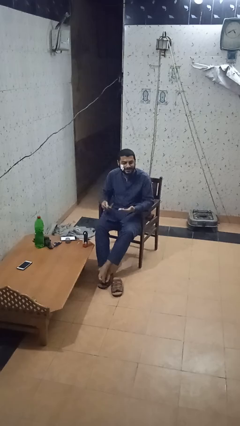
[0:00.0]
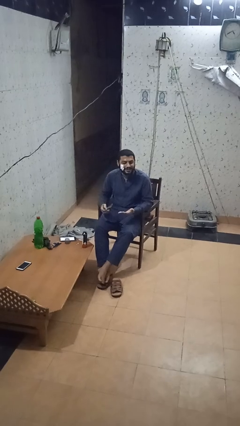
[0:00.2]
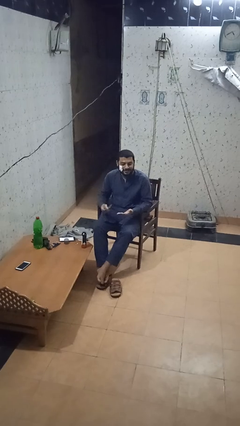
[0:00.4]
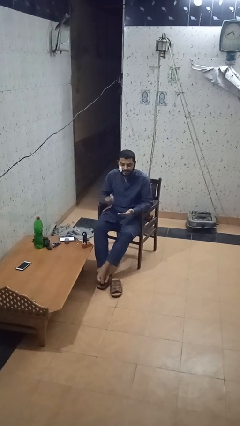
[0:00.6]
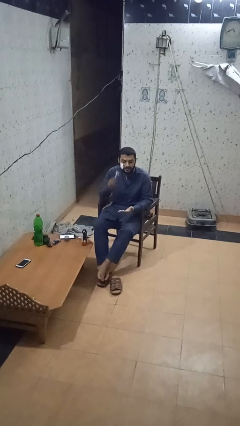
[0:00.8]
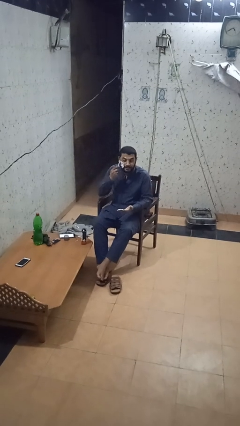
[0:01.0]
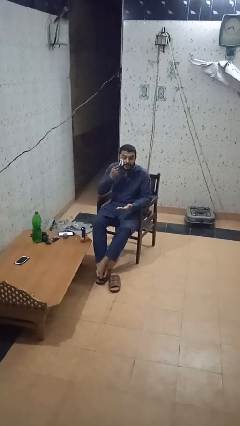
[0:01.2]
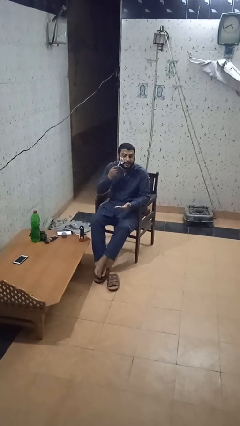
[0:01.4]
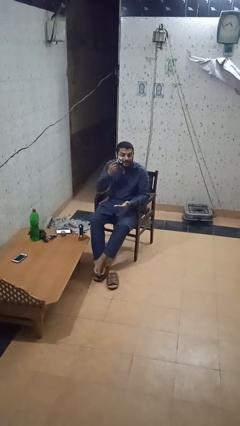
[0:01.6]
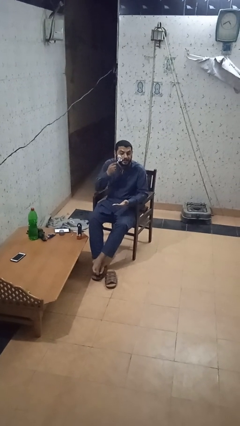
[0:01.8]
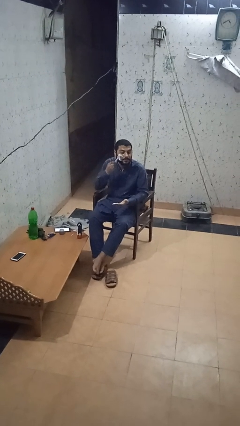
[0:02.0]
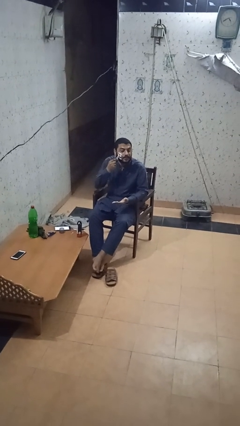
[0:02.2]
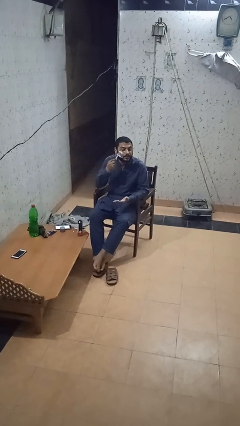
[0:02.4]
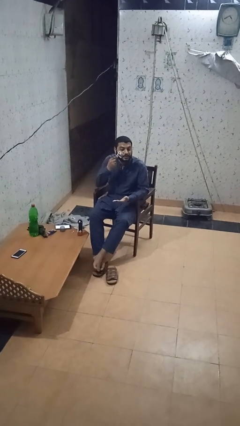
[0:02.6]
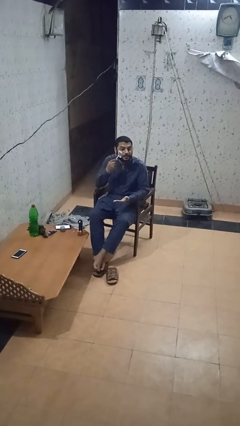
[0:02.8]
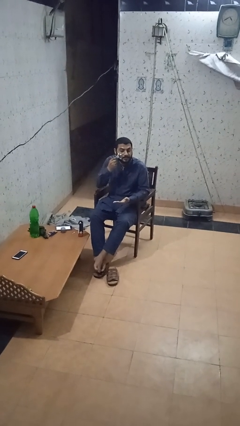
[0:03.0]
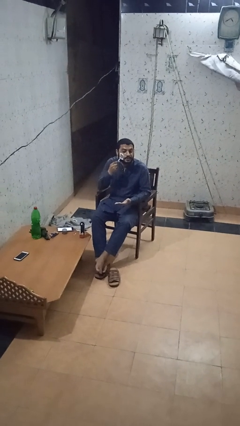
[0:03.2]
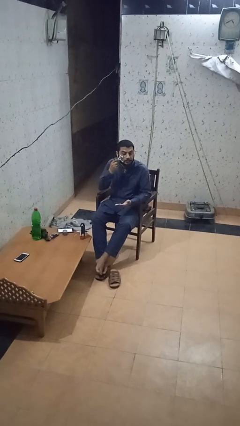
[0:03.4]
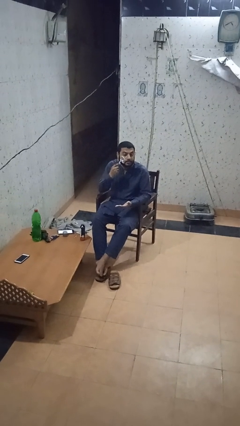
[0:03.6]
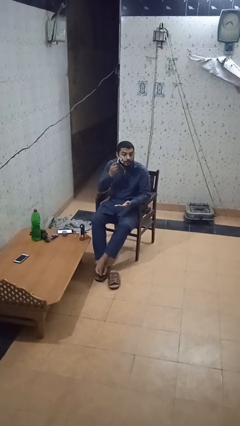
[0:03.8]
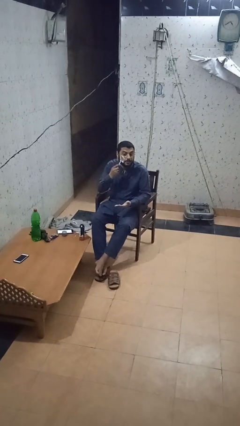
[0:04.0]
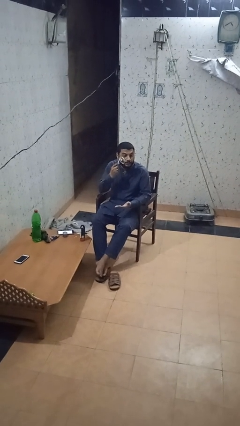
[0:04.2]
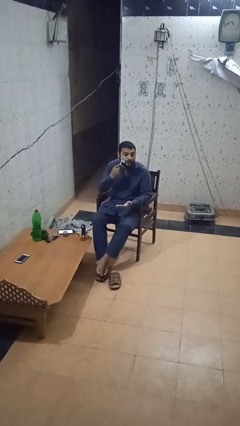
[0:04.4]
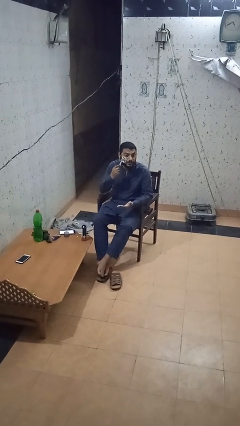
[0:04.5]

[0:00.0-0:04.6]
person shaves face

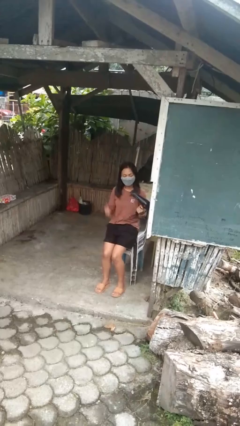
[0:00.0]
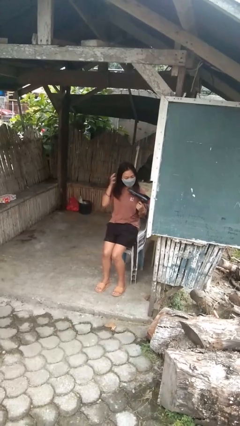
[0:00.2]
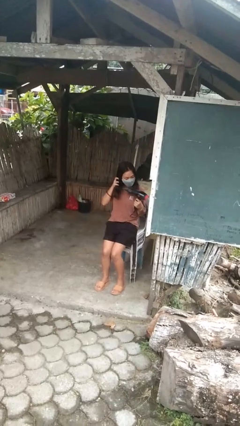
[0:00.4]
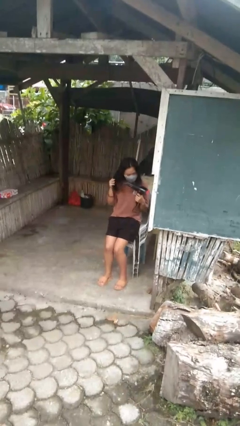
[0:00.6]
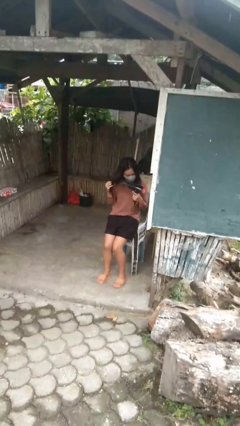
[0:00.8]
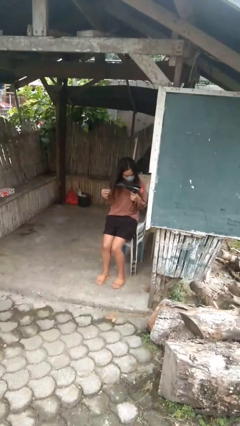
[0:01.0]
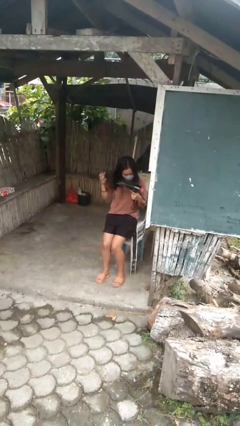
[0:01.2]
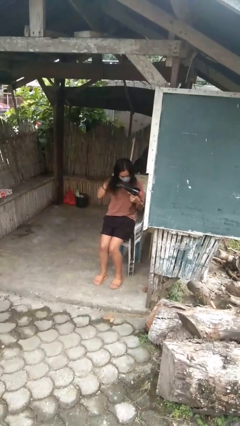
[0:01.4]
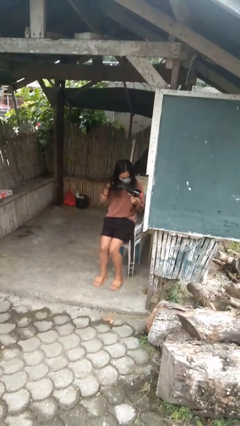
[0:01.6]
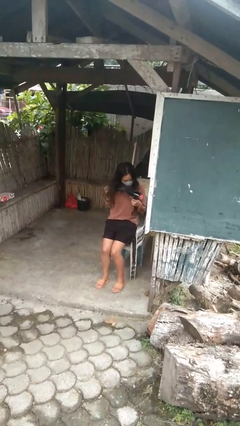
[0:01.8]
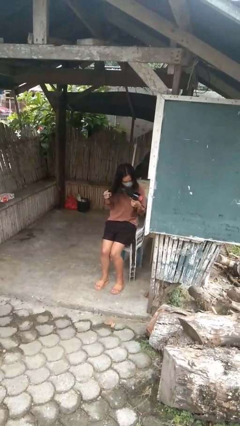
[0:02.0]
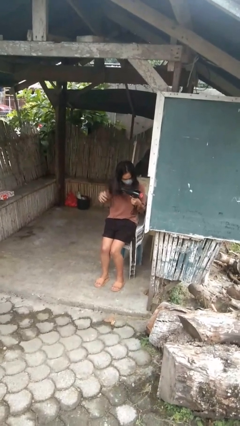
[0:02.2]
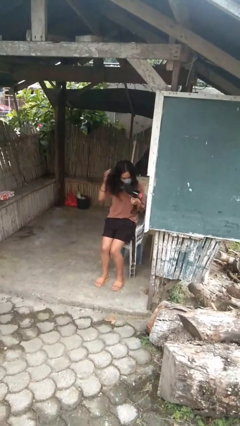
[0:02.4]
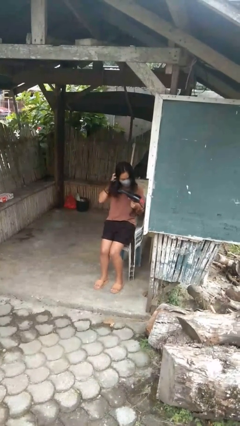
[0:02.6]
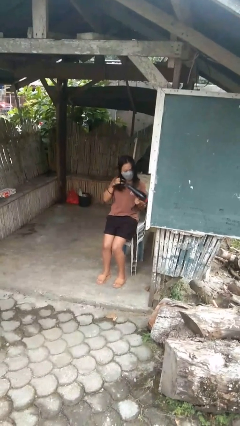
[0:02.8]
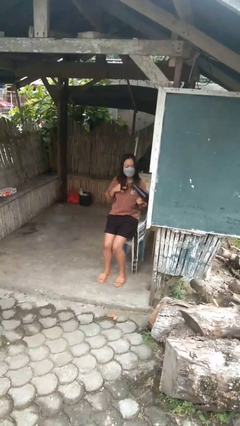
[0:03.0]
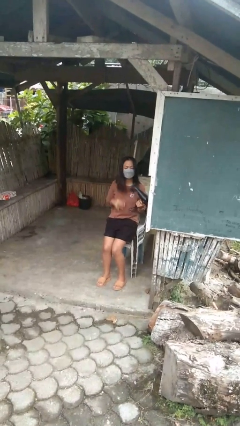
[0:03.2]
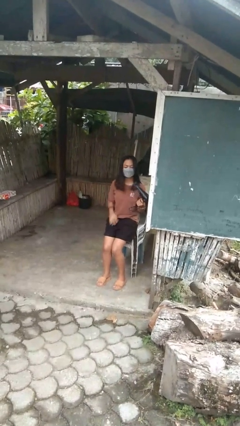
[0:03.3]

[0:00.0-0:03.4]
person dries hair with hairdryer

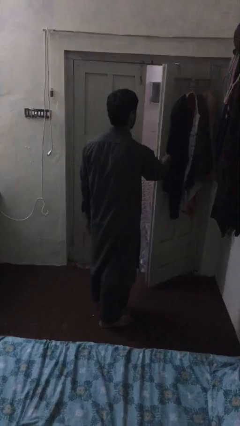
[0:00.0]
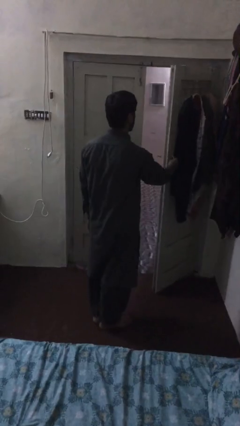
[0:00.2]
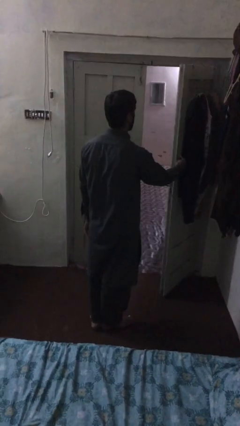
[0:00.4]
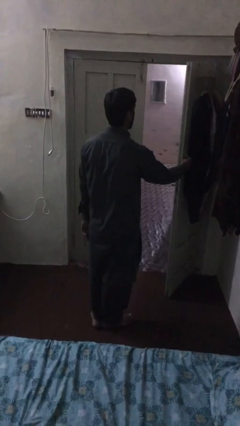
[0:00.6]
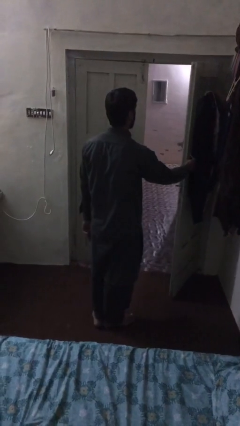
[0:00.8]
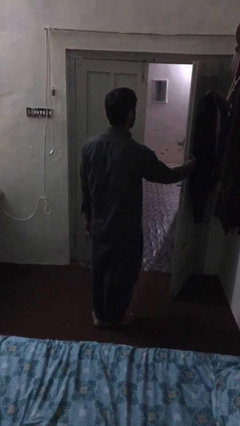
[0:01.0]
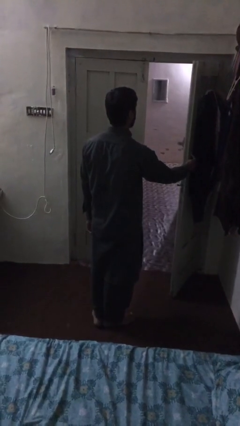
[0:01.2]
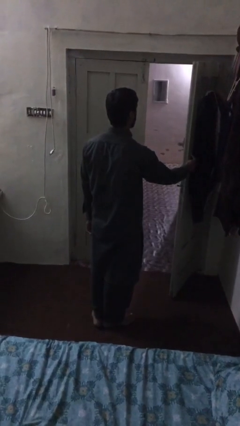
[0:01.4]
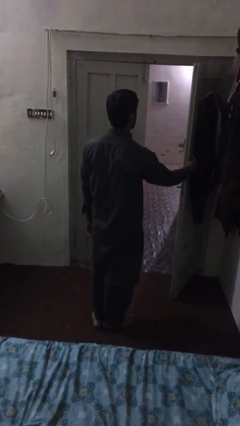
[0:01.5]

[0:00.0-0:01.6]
person opens facility door

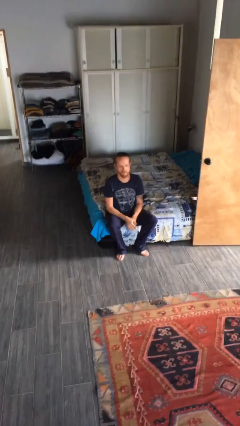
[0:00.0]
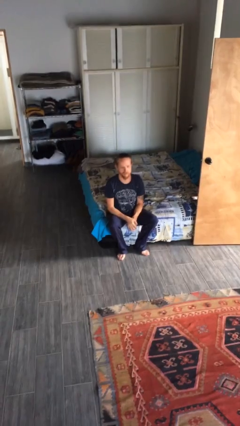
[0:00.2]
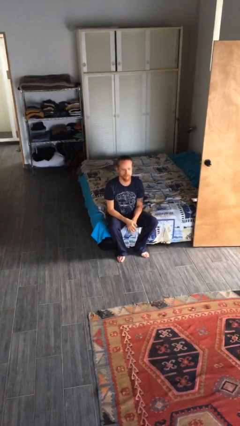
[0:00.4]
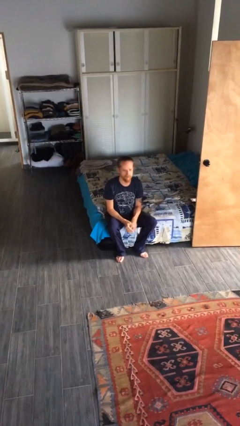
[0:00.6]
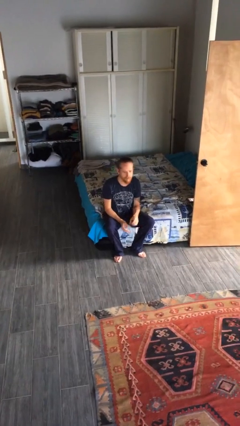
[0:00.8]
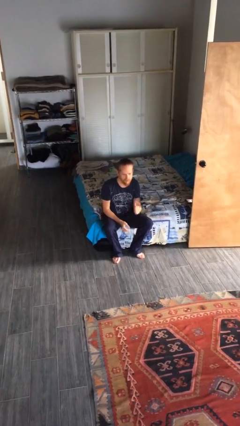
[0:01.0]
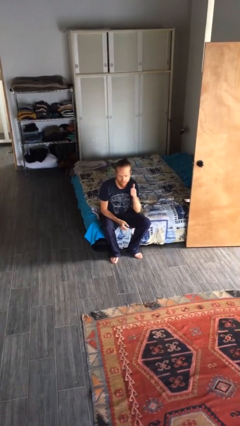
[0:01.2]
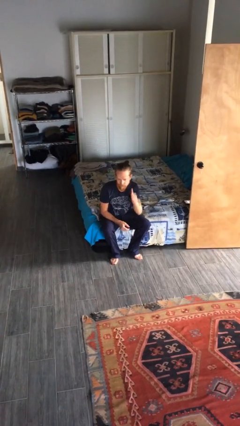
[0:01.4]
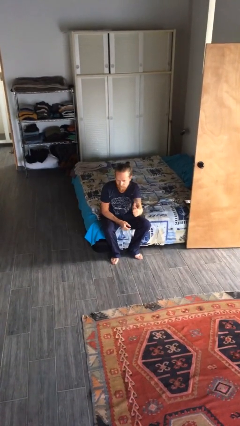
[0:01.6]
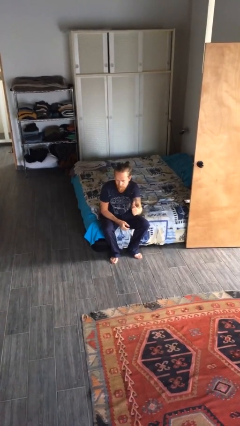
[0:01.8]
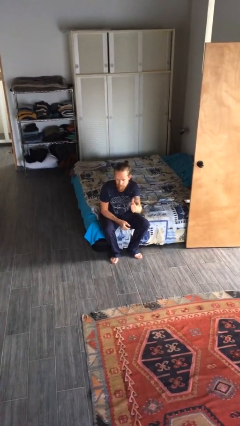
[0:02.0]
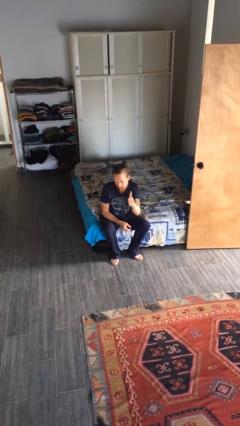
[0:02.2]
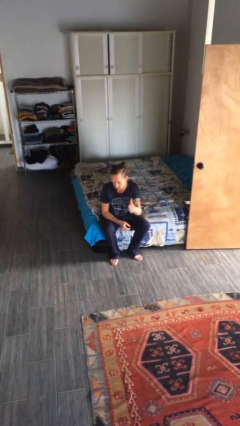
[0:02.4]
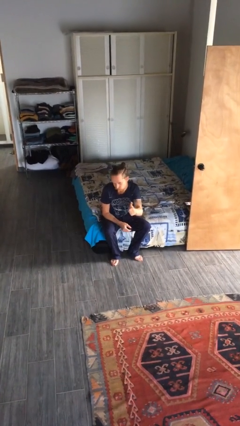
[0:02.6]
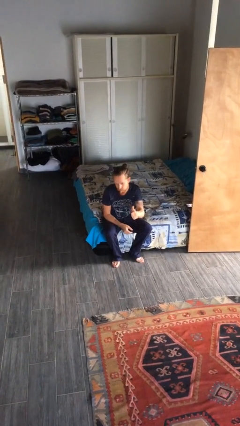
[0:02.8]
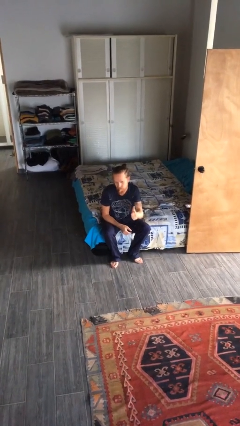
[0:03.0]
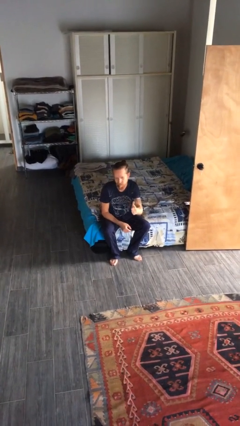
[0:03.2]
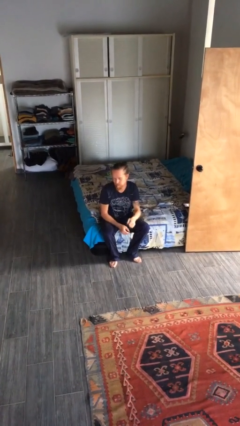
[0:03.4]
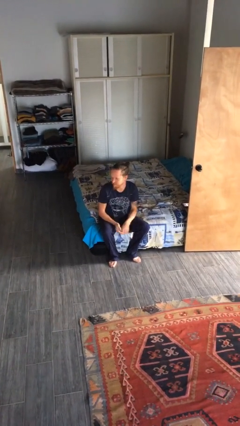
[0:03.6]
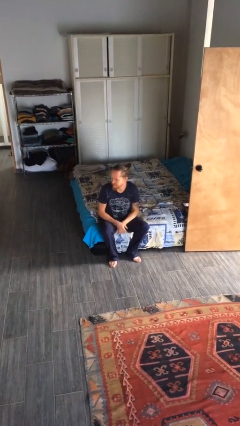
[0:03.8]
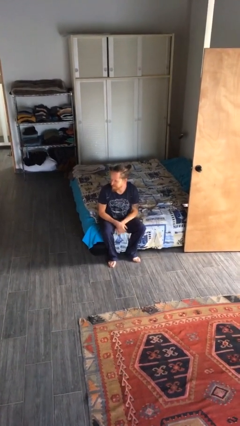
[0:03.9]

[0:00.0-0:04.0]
person gestures thumbs up

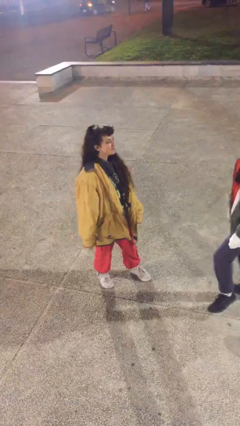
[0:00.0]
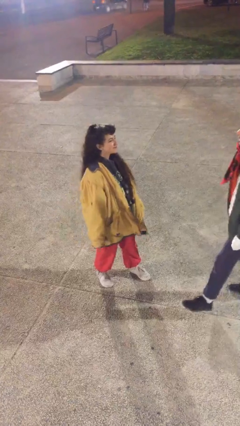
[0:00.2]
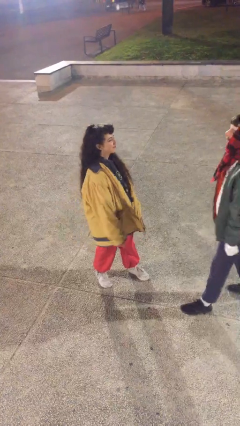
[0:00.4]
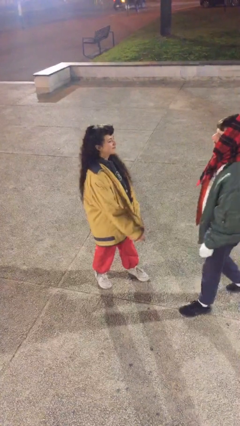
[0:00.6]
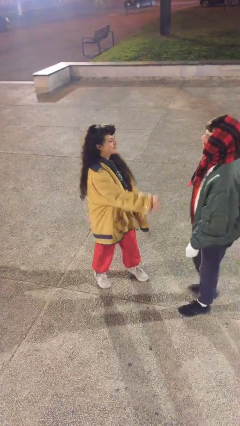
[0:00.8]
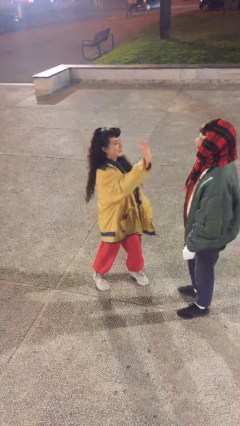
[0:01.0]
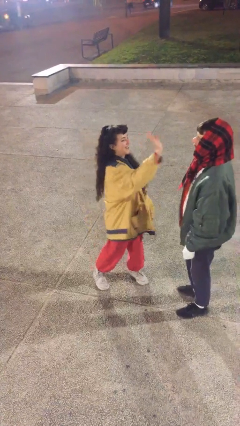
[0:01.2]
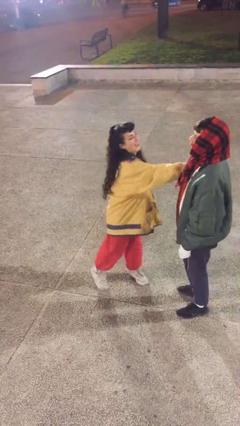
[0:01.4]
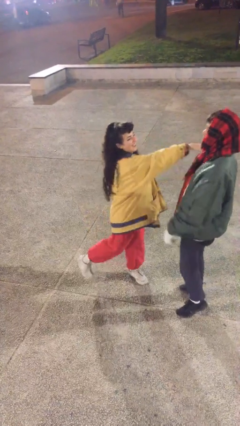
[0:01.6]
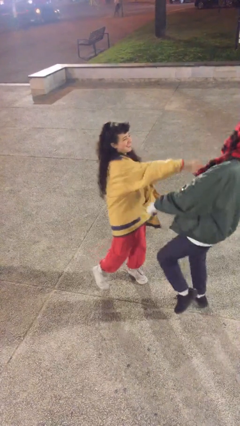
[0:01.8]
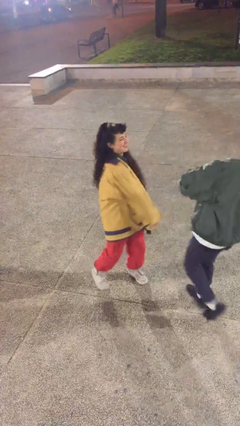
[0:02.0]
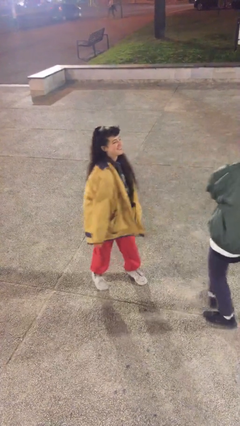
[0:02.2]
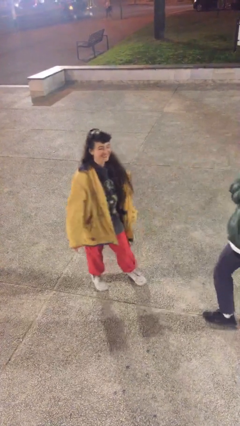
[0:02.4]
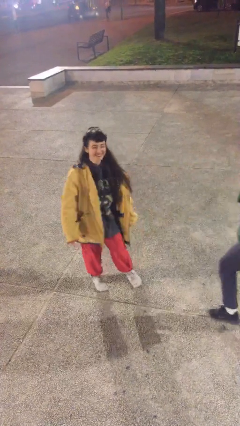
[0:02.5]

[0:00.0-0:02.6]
person shoves person

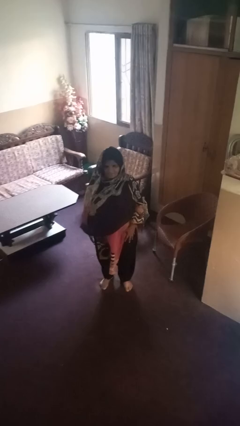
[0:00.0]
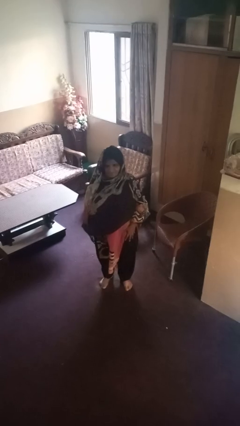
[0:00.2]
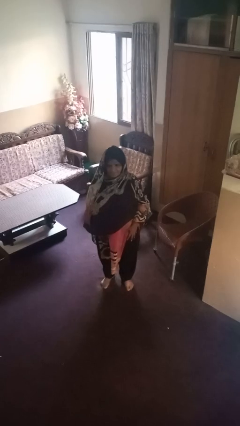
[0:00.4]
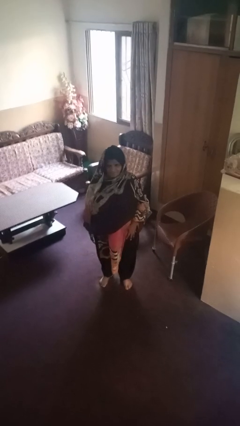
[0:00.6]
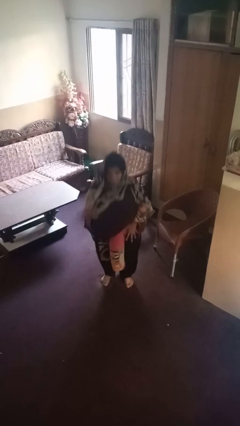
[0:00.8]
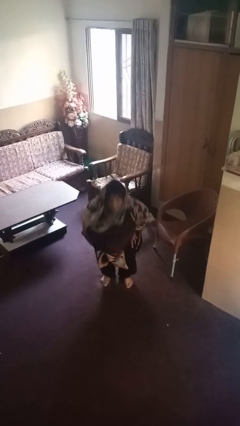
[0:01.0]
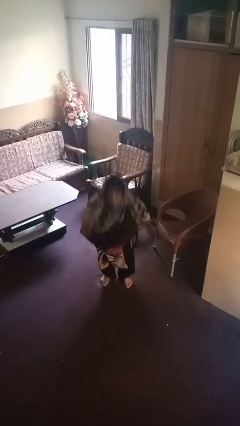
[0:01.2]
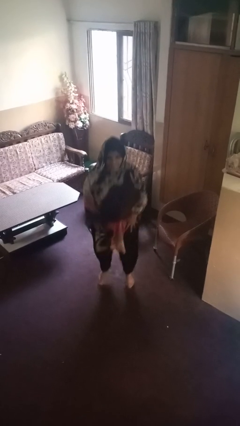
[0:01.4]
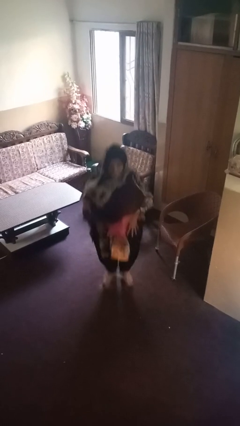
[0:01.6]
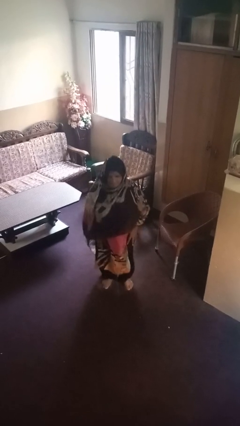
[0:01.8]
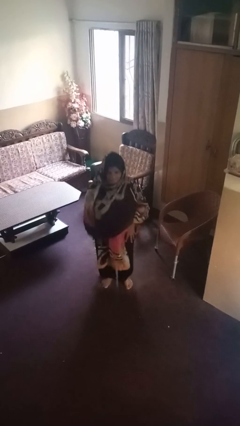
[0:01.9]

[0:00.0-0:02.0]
person jumps
